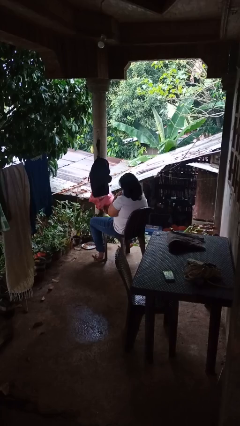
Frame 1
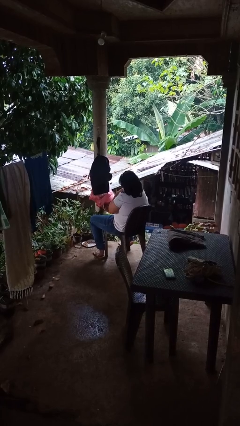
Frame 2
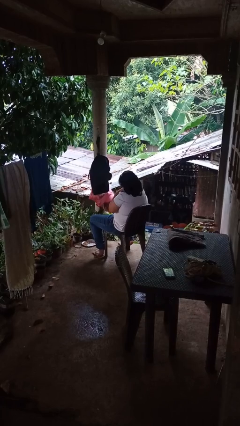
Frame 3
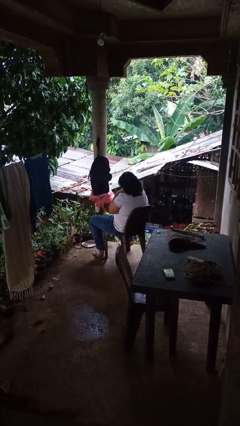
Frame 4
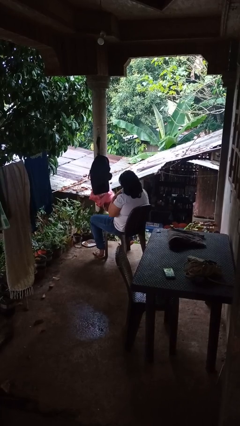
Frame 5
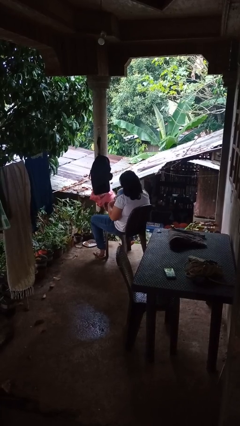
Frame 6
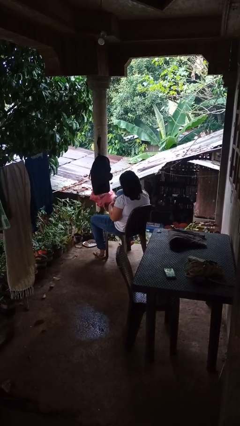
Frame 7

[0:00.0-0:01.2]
person hugs stuffed animal

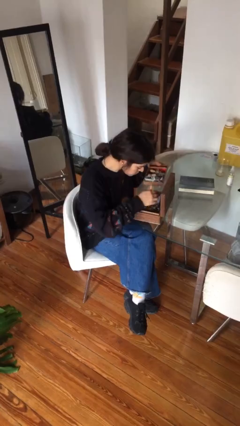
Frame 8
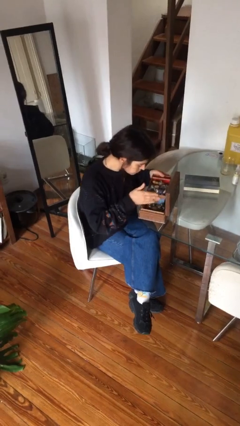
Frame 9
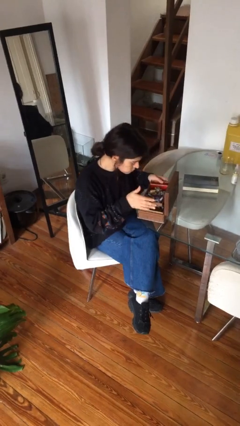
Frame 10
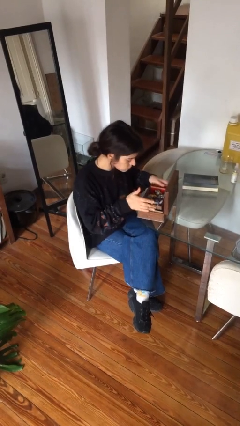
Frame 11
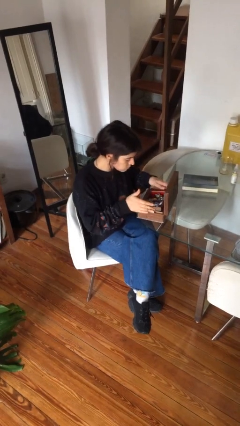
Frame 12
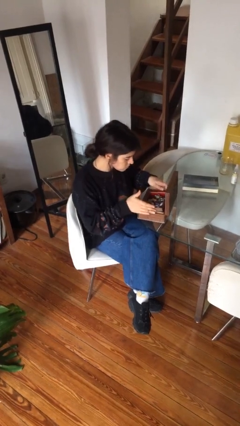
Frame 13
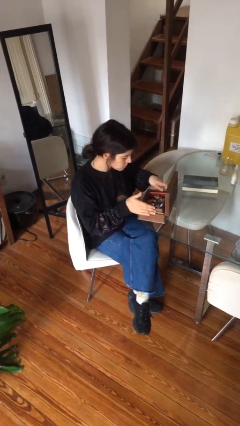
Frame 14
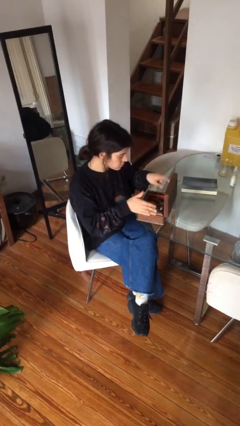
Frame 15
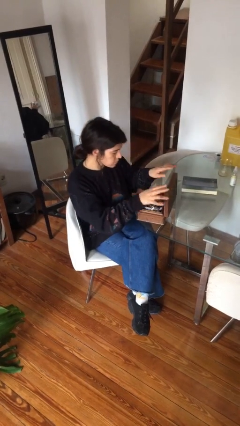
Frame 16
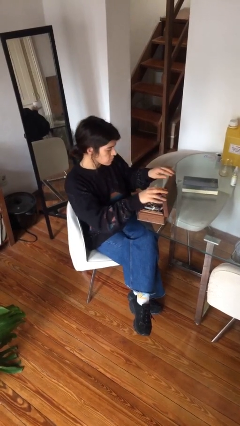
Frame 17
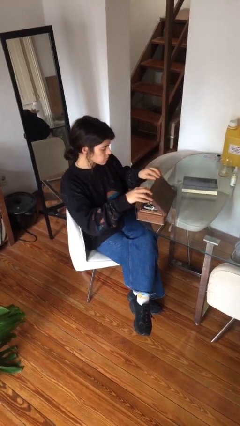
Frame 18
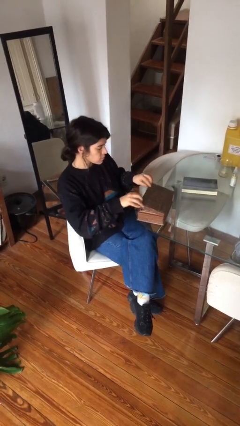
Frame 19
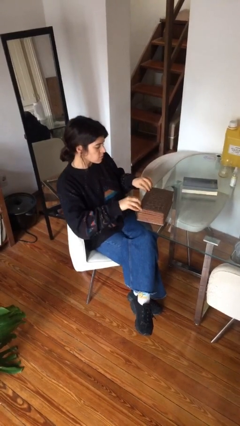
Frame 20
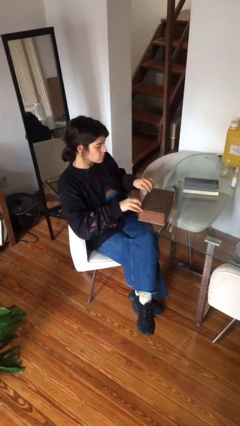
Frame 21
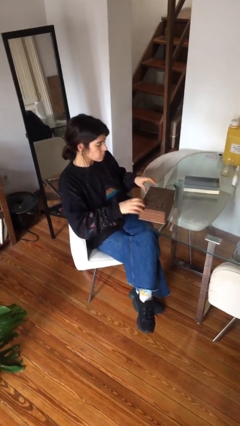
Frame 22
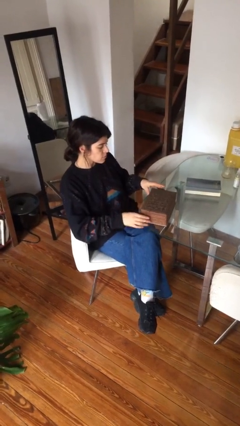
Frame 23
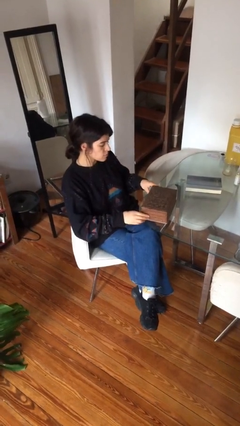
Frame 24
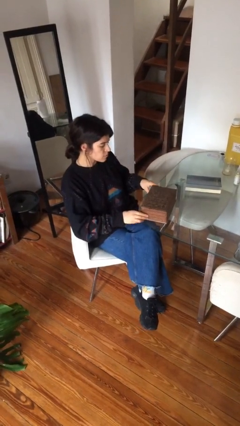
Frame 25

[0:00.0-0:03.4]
person closes jewelry box

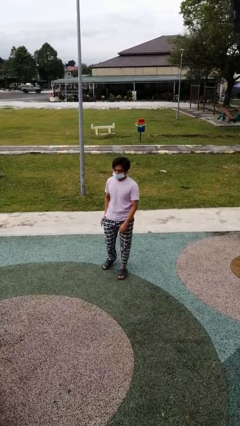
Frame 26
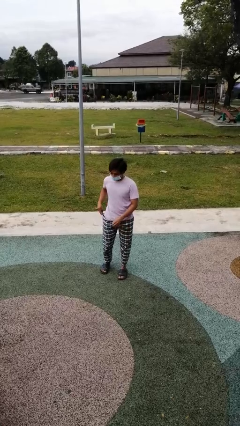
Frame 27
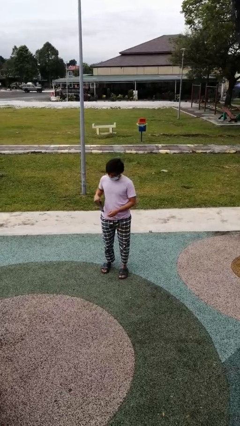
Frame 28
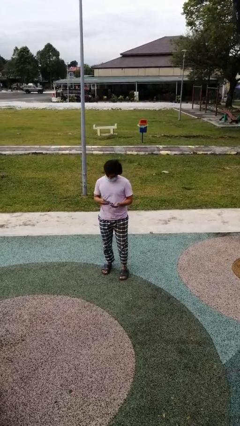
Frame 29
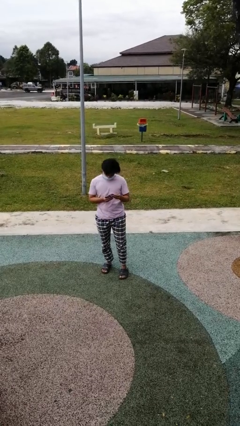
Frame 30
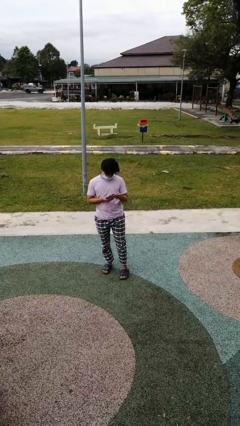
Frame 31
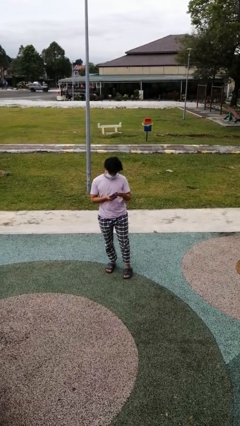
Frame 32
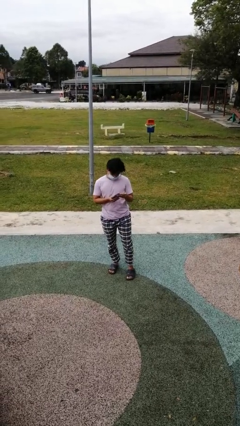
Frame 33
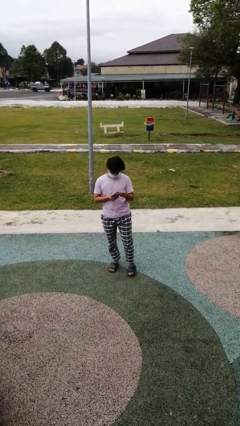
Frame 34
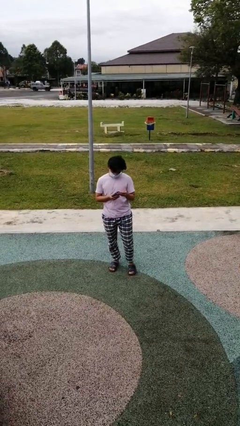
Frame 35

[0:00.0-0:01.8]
person takes phone from pocket

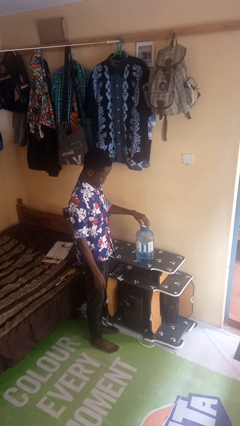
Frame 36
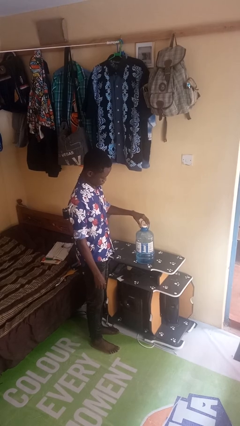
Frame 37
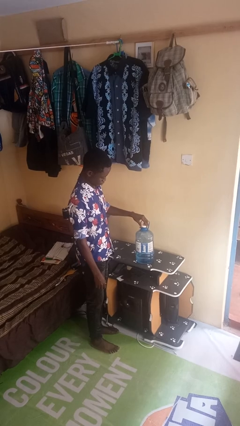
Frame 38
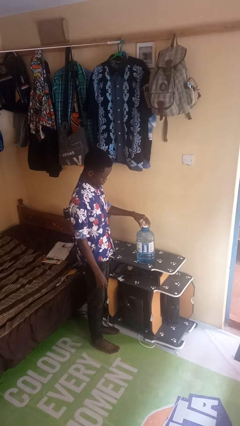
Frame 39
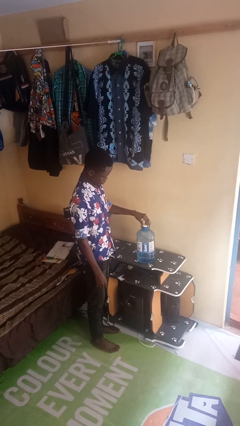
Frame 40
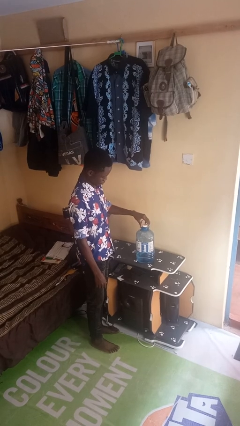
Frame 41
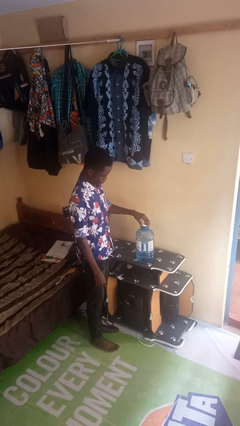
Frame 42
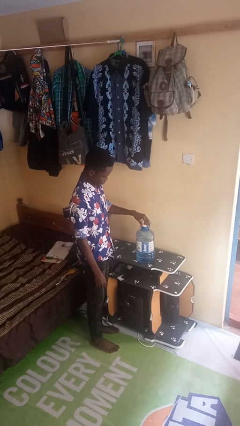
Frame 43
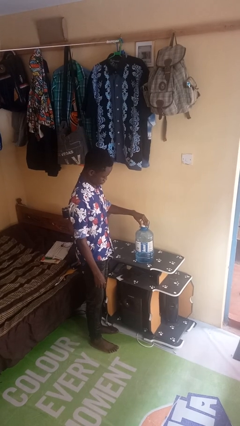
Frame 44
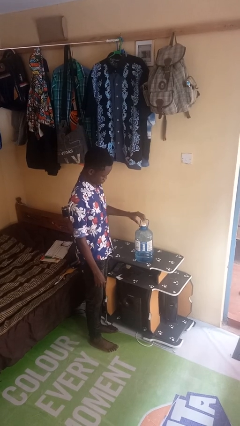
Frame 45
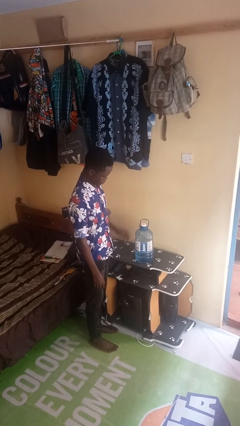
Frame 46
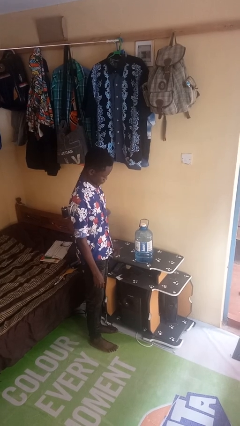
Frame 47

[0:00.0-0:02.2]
person screws lid to bottle

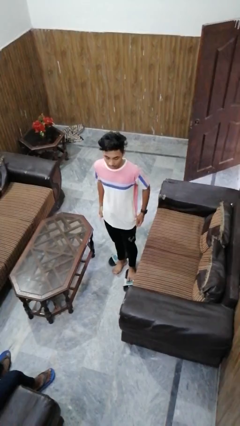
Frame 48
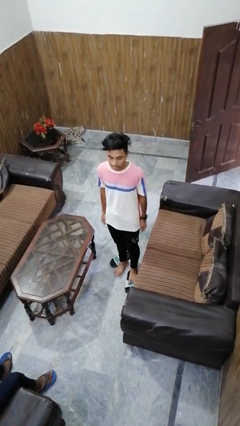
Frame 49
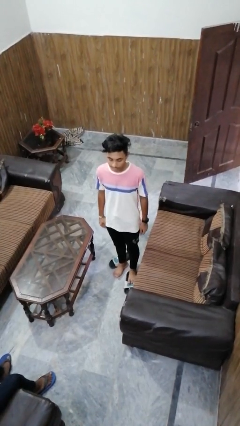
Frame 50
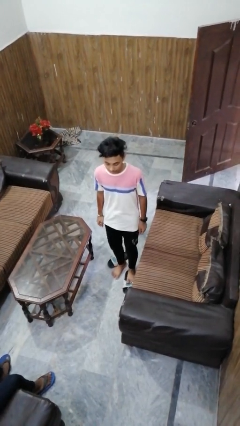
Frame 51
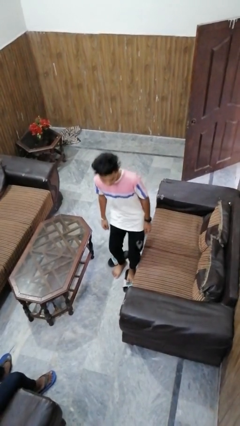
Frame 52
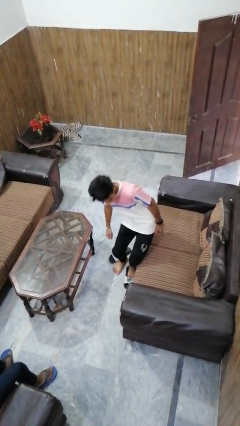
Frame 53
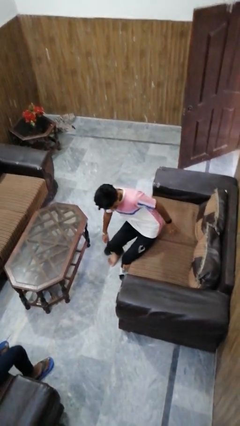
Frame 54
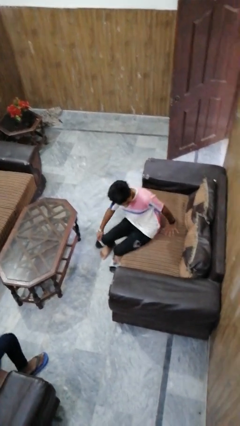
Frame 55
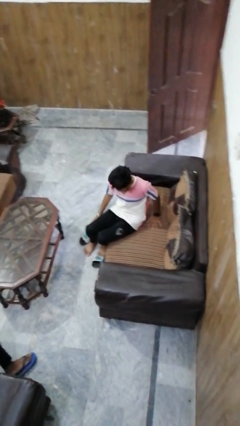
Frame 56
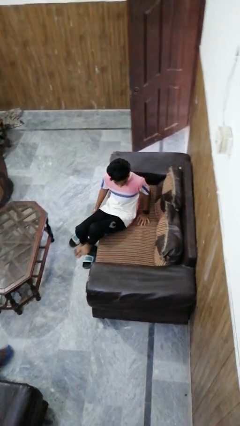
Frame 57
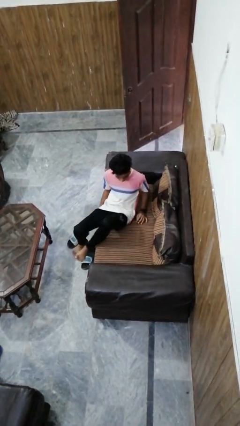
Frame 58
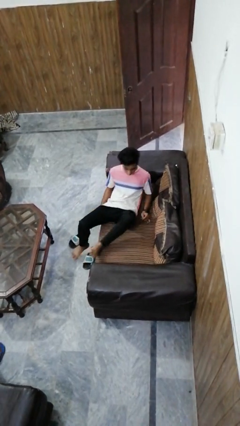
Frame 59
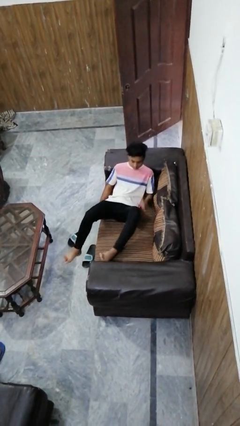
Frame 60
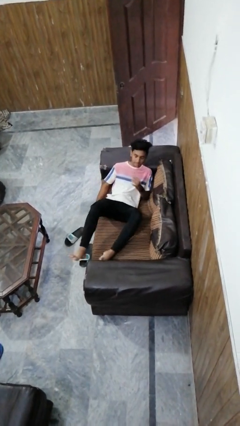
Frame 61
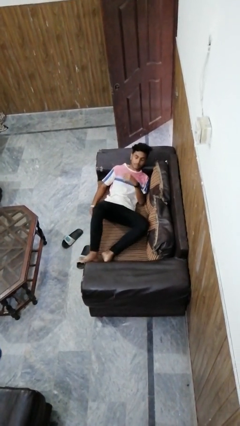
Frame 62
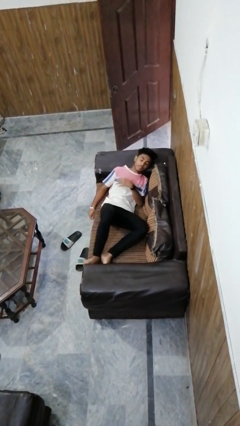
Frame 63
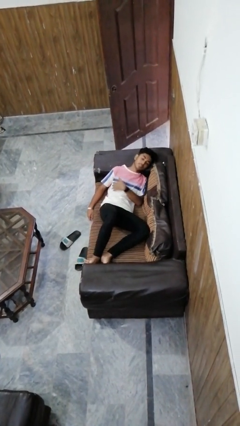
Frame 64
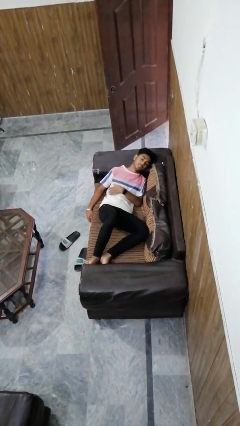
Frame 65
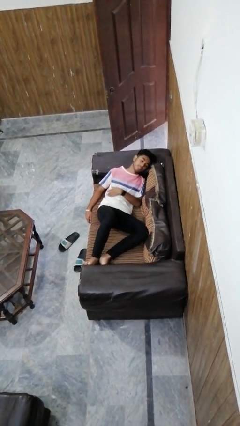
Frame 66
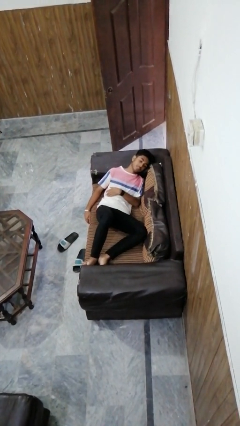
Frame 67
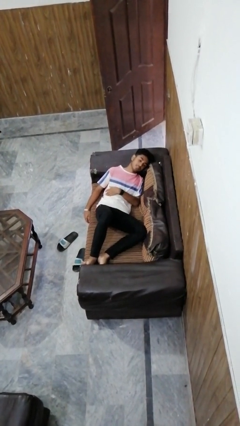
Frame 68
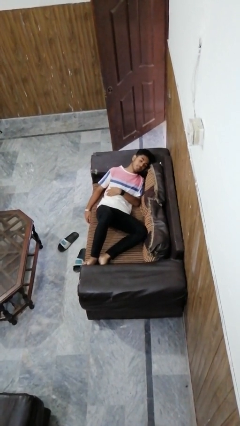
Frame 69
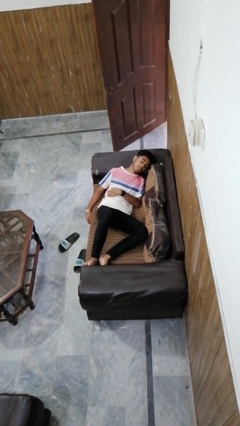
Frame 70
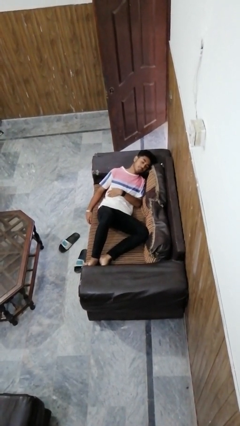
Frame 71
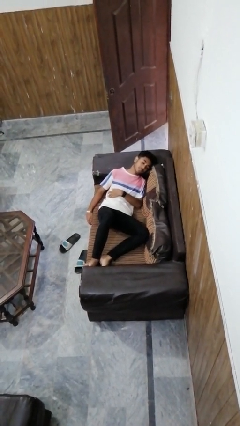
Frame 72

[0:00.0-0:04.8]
person lies down on couch

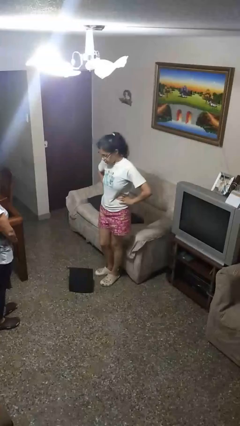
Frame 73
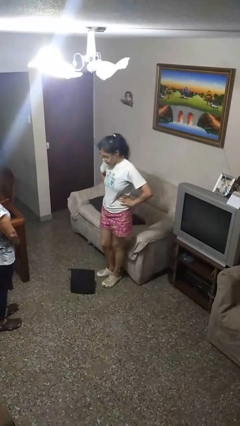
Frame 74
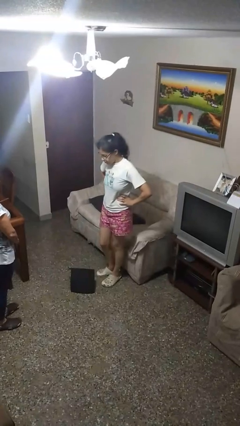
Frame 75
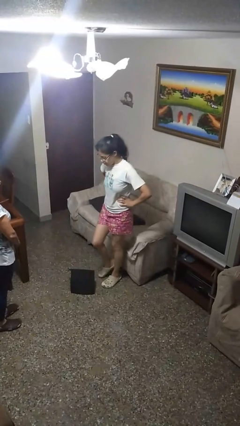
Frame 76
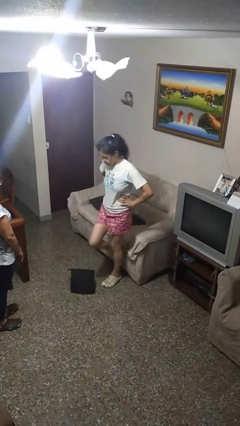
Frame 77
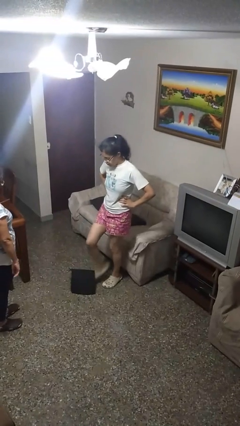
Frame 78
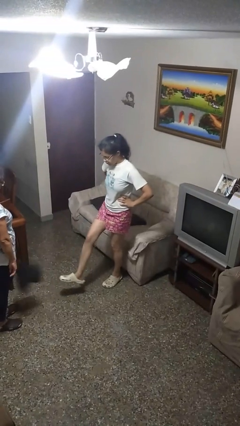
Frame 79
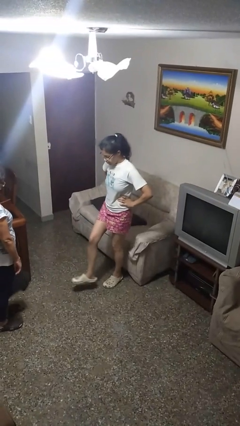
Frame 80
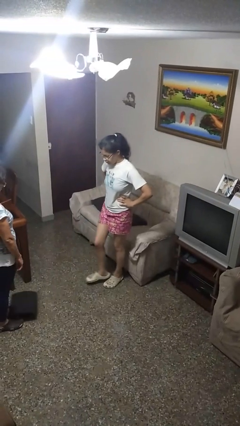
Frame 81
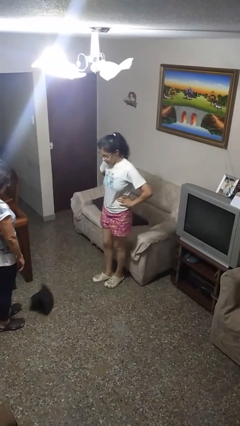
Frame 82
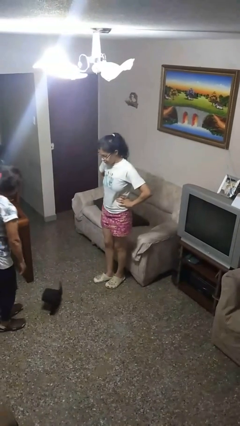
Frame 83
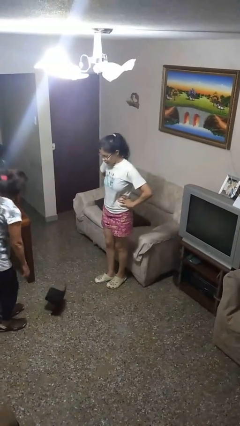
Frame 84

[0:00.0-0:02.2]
person kicks object to person

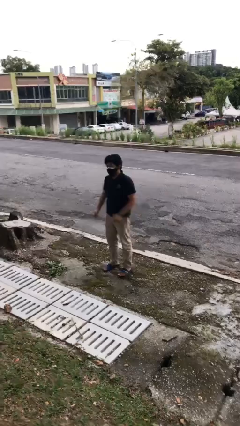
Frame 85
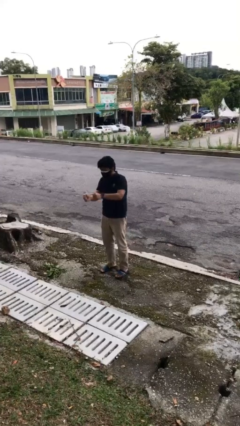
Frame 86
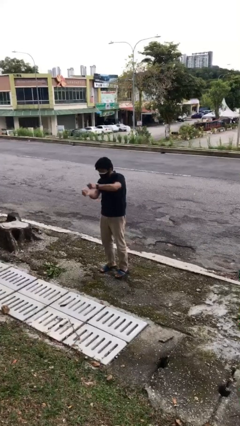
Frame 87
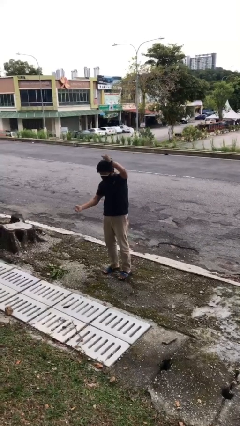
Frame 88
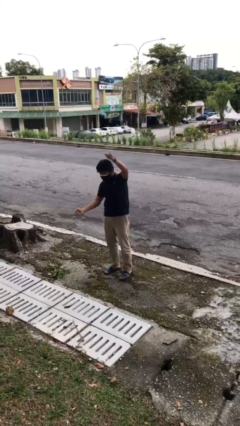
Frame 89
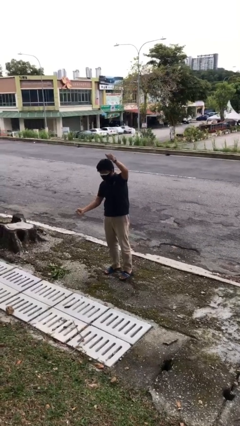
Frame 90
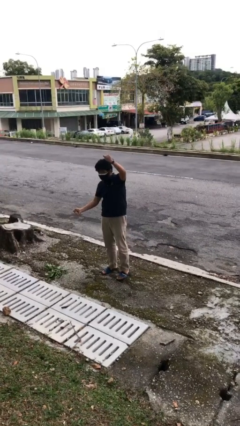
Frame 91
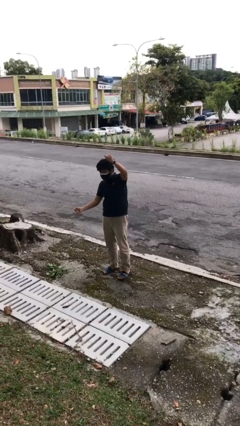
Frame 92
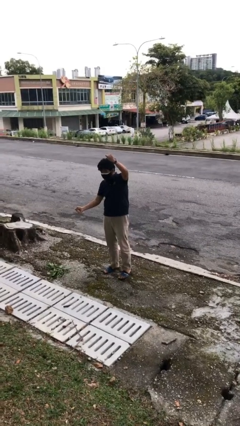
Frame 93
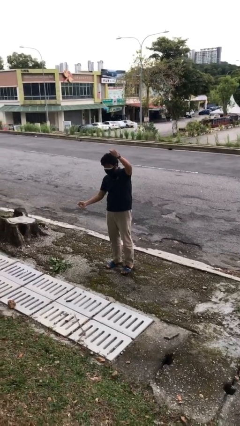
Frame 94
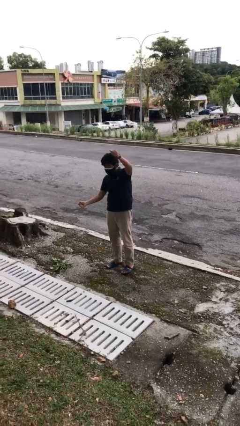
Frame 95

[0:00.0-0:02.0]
person gestures zoom in
